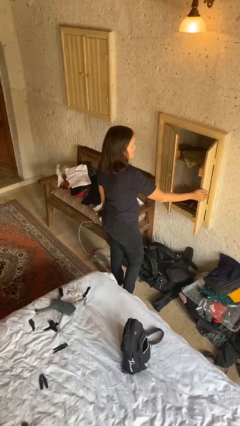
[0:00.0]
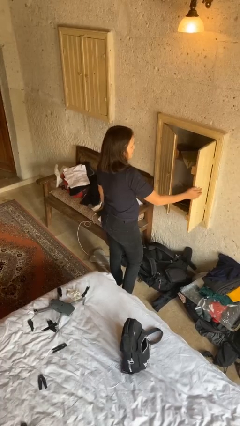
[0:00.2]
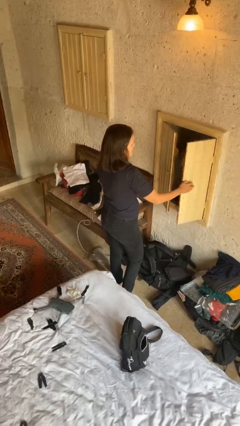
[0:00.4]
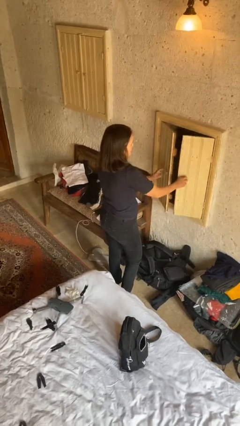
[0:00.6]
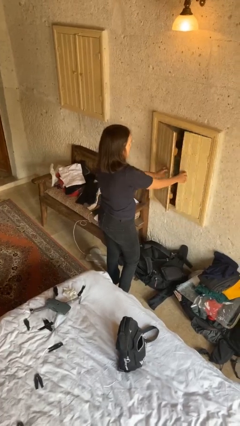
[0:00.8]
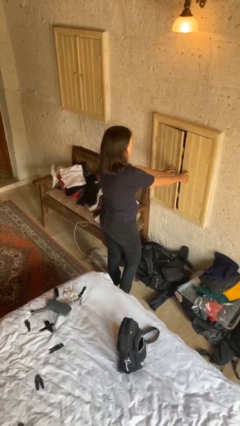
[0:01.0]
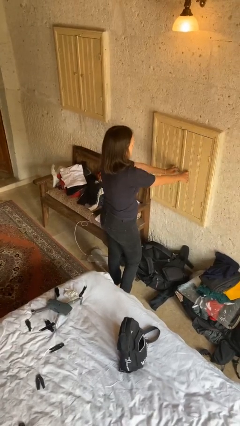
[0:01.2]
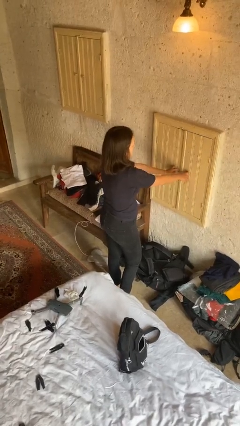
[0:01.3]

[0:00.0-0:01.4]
person closes closet door

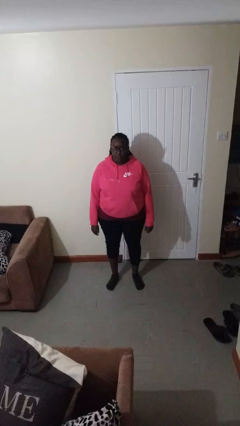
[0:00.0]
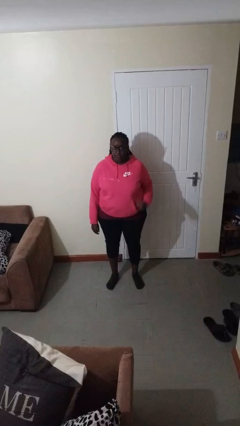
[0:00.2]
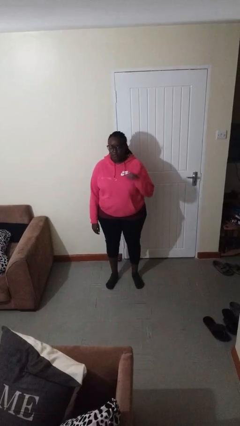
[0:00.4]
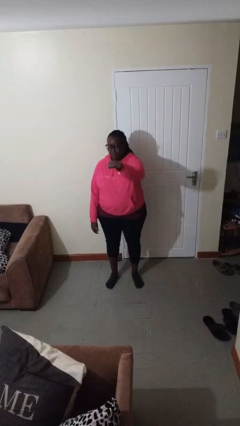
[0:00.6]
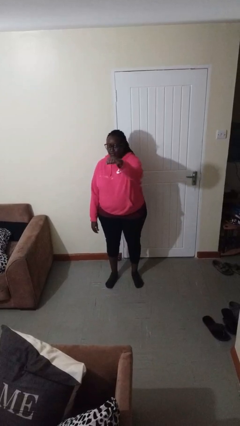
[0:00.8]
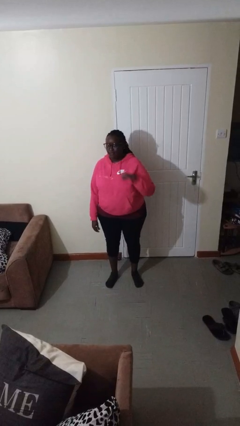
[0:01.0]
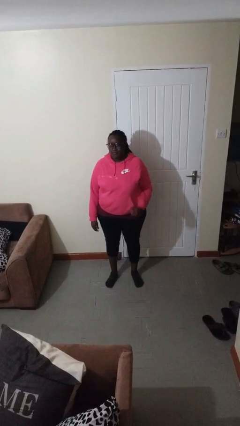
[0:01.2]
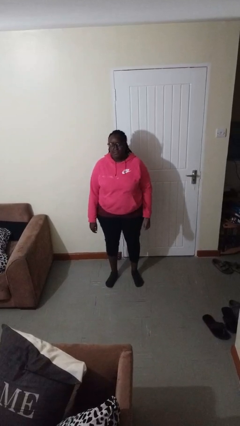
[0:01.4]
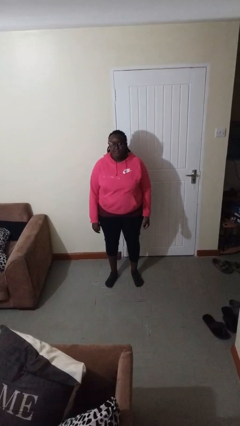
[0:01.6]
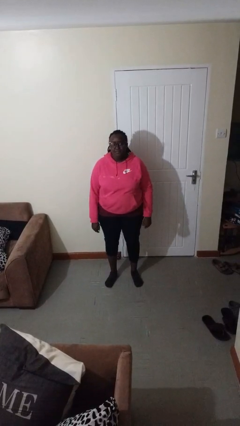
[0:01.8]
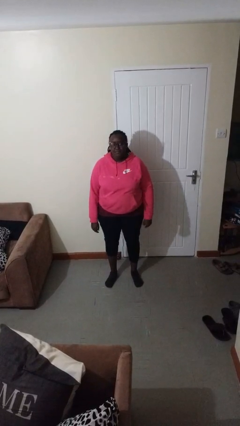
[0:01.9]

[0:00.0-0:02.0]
person punches

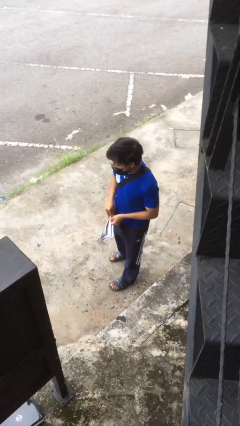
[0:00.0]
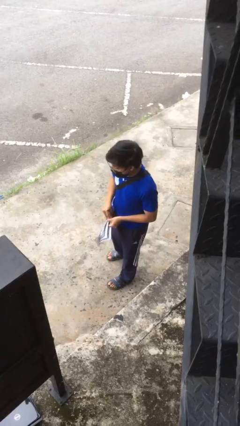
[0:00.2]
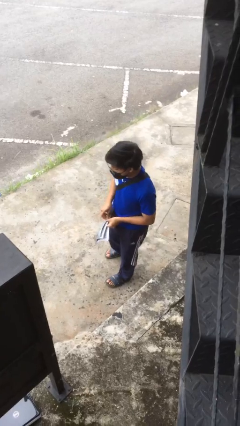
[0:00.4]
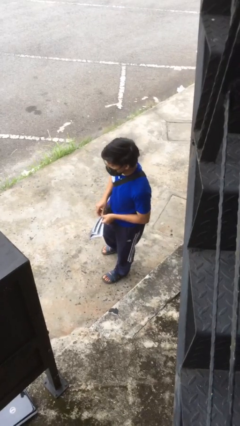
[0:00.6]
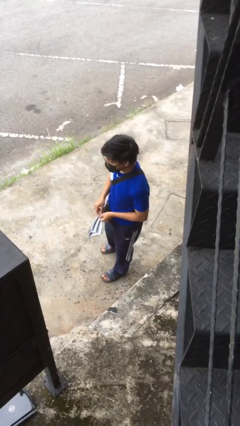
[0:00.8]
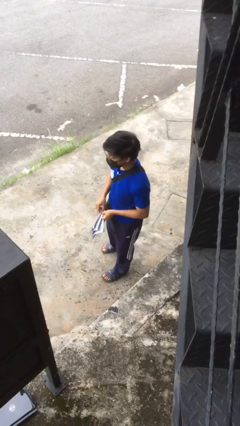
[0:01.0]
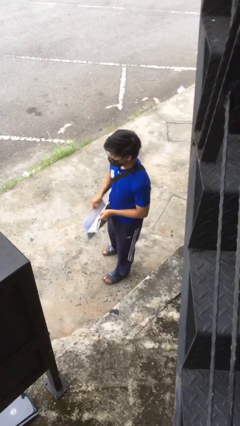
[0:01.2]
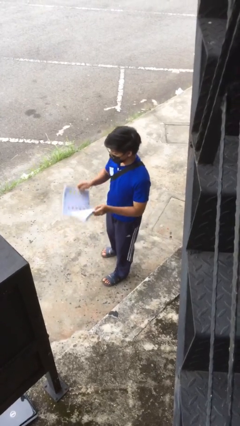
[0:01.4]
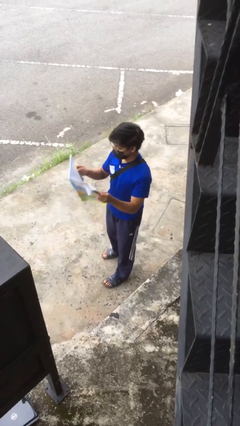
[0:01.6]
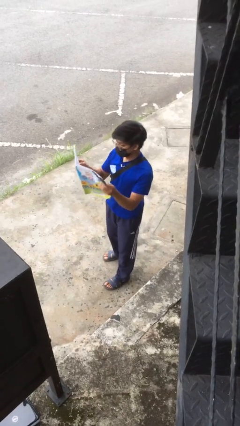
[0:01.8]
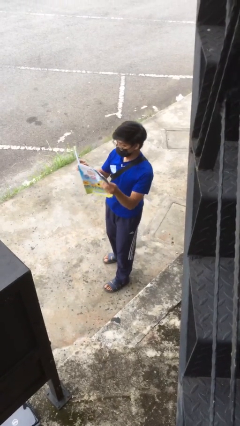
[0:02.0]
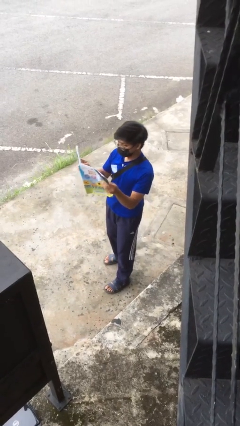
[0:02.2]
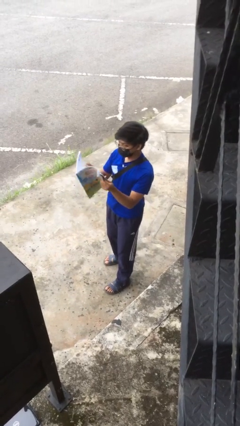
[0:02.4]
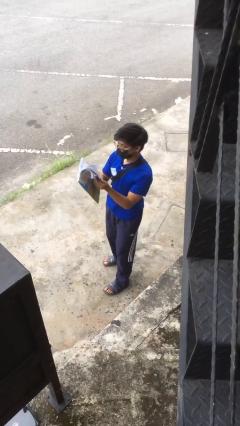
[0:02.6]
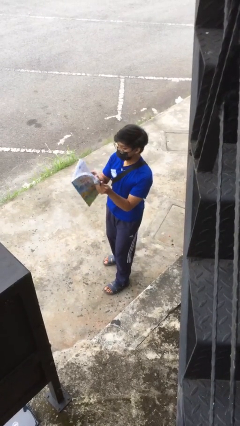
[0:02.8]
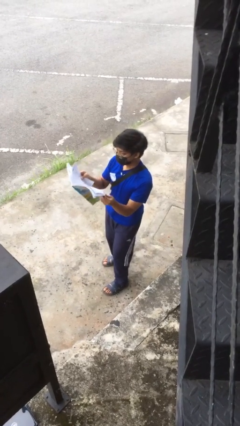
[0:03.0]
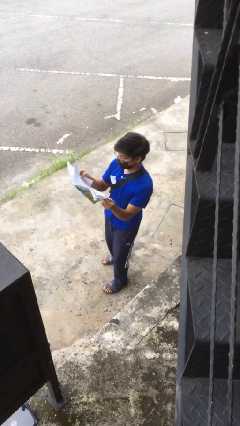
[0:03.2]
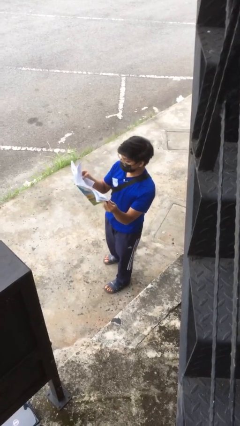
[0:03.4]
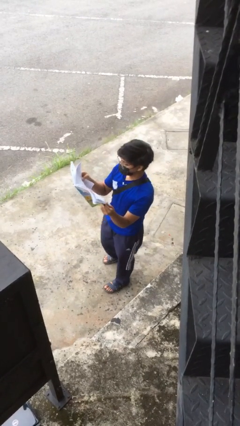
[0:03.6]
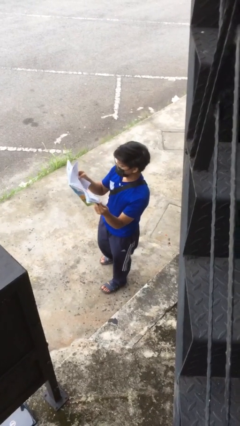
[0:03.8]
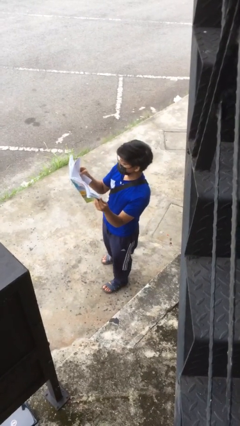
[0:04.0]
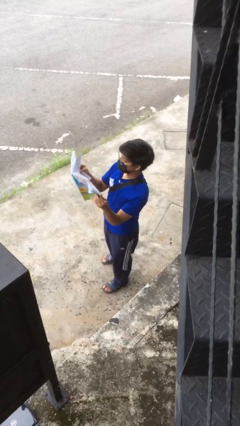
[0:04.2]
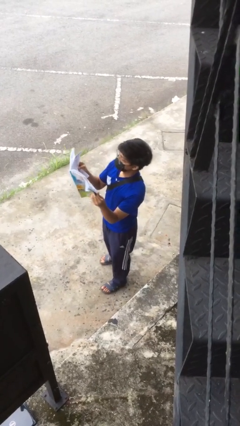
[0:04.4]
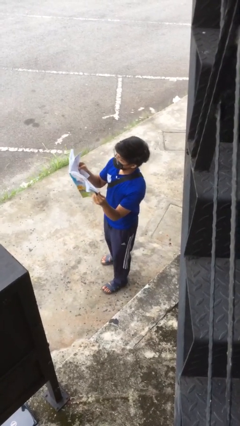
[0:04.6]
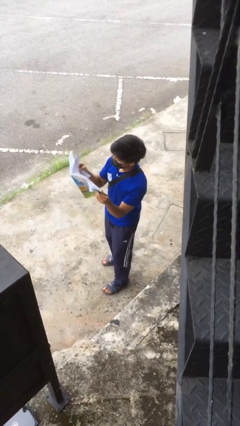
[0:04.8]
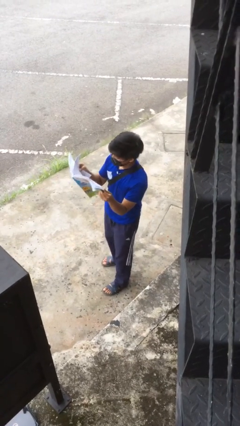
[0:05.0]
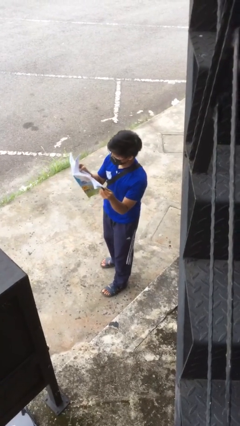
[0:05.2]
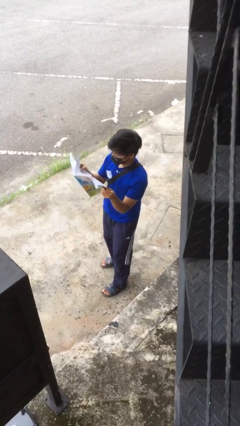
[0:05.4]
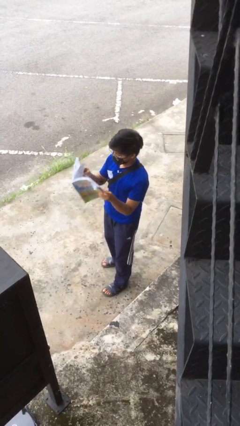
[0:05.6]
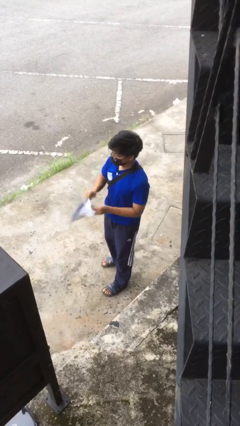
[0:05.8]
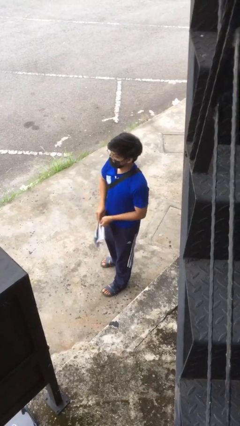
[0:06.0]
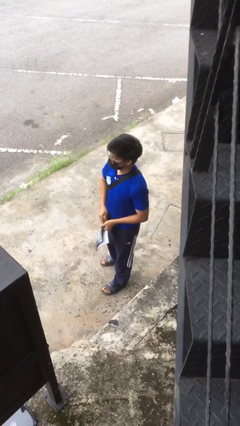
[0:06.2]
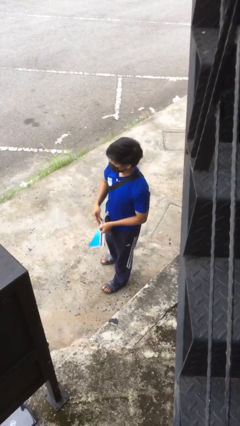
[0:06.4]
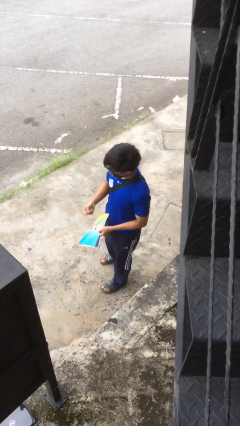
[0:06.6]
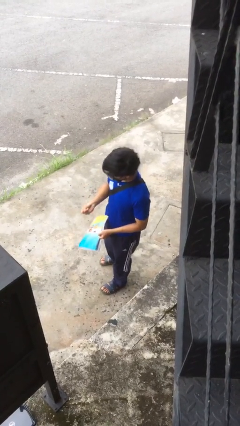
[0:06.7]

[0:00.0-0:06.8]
person reads document

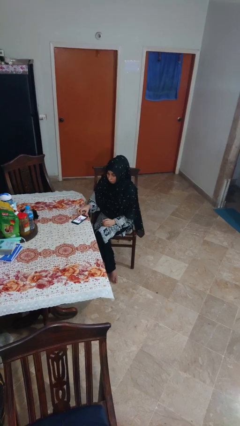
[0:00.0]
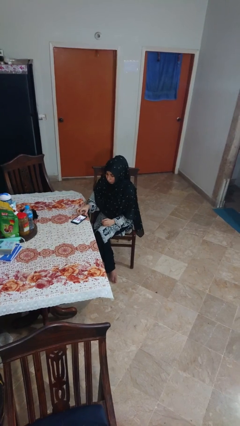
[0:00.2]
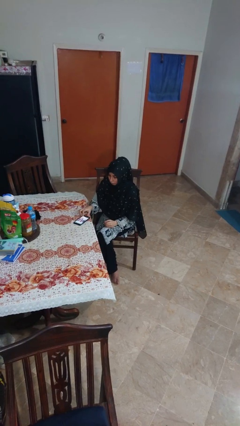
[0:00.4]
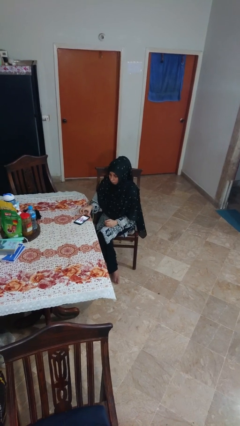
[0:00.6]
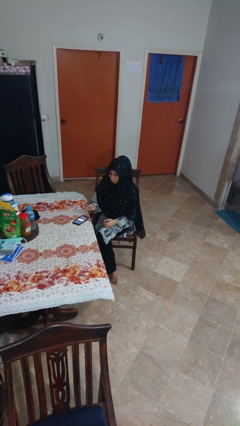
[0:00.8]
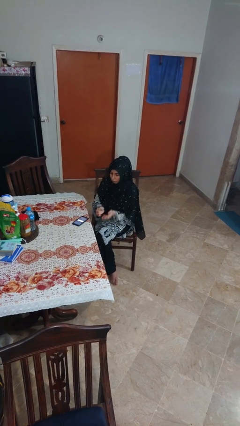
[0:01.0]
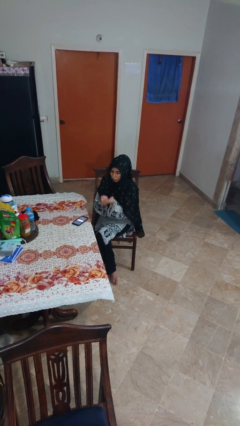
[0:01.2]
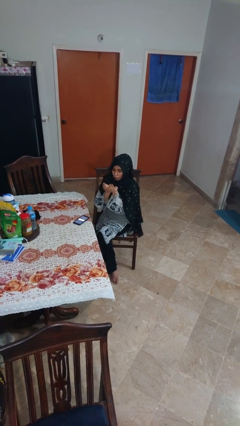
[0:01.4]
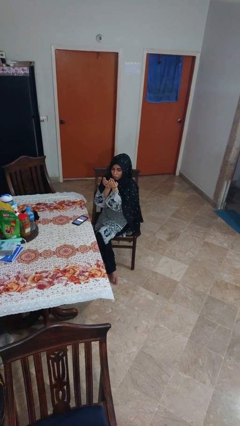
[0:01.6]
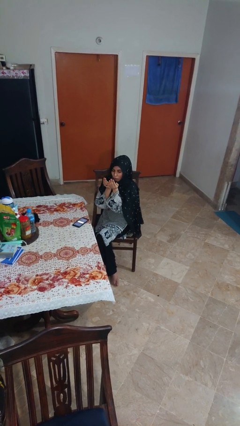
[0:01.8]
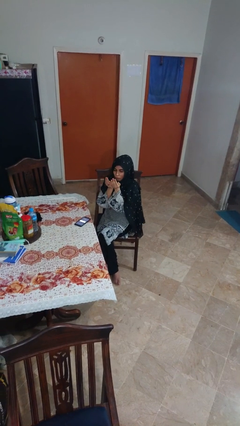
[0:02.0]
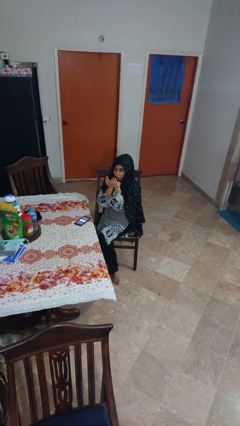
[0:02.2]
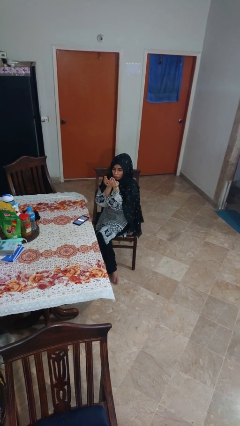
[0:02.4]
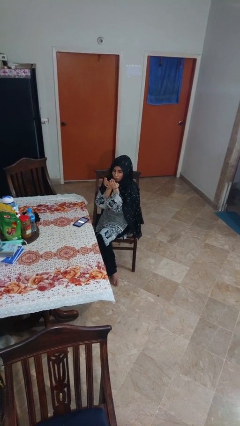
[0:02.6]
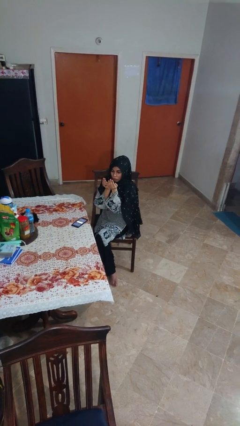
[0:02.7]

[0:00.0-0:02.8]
person prays

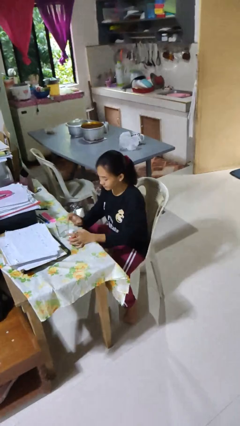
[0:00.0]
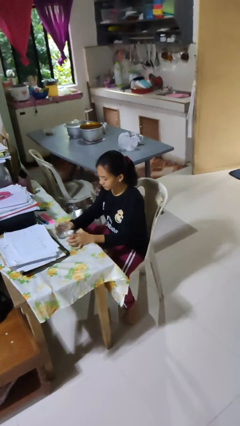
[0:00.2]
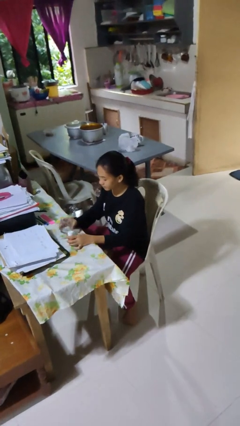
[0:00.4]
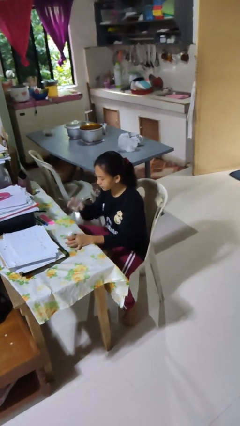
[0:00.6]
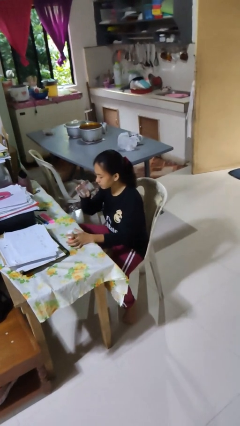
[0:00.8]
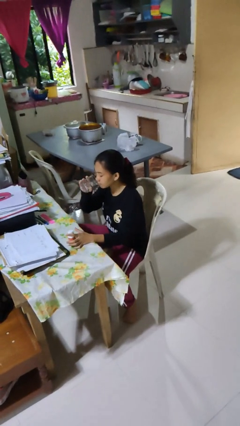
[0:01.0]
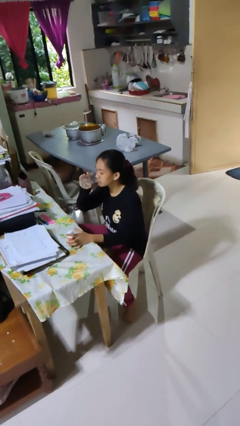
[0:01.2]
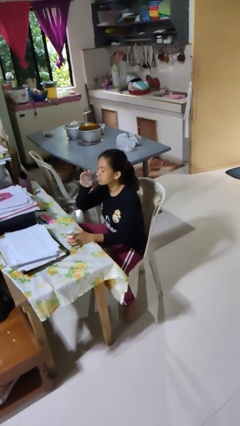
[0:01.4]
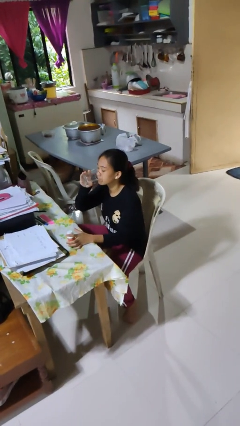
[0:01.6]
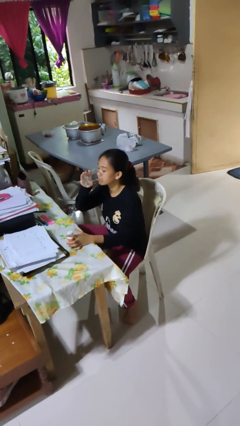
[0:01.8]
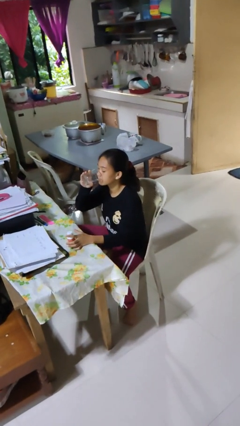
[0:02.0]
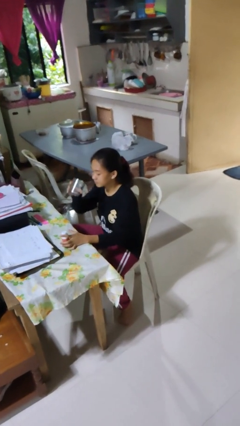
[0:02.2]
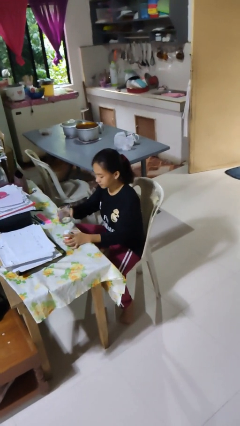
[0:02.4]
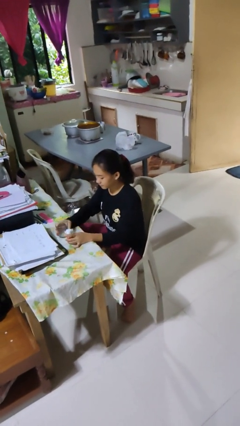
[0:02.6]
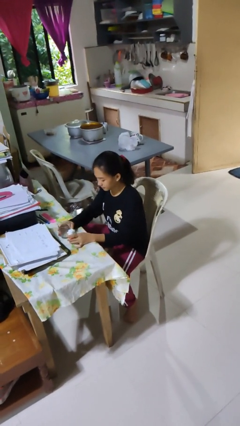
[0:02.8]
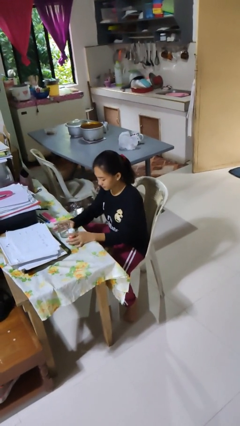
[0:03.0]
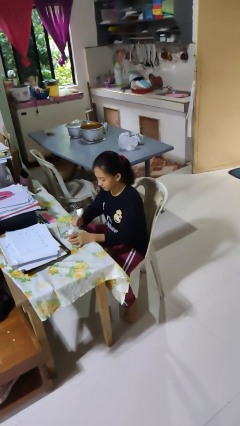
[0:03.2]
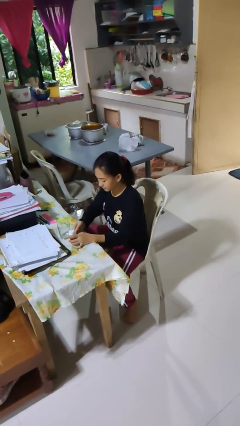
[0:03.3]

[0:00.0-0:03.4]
person drinks from cup

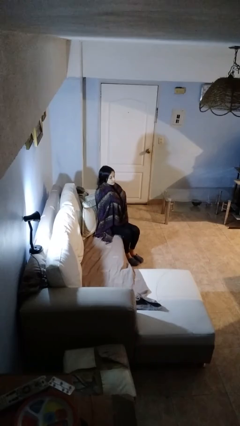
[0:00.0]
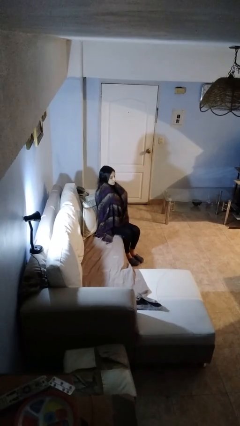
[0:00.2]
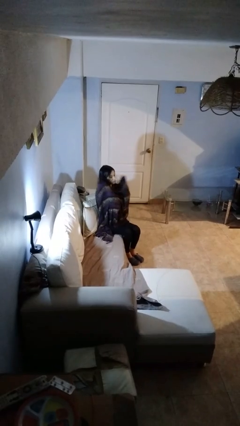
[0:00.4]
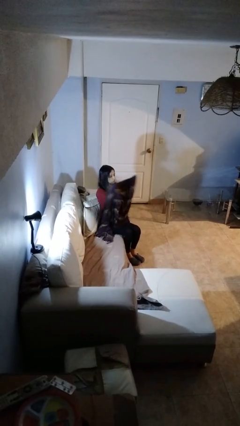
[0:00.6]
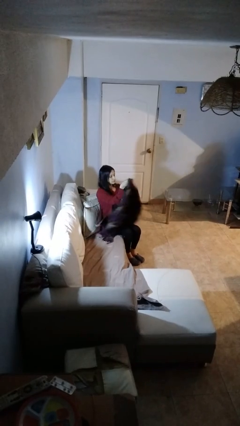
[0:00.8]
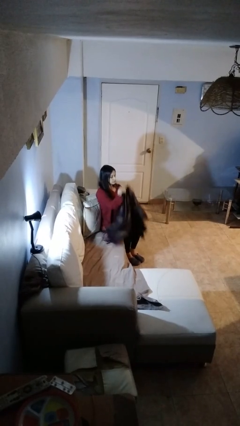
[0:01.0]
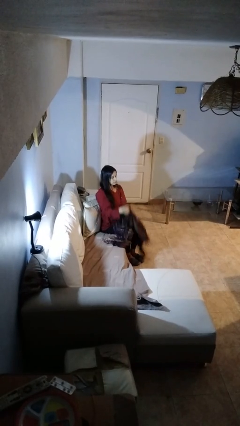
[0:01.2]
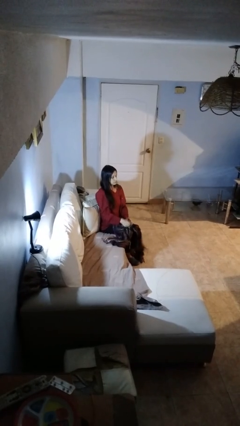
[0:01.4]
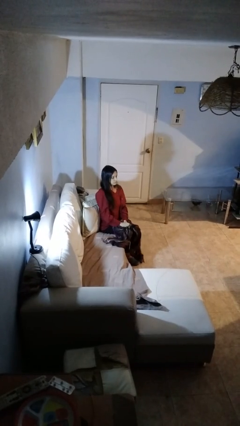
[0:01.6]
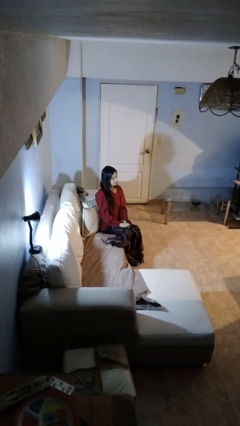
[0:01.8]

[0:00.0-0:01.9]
person uncovers with blanket
